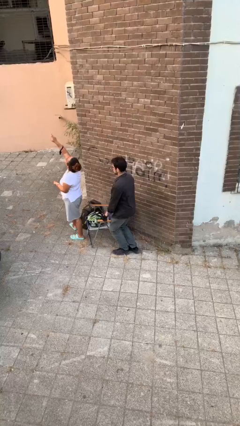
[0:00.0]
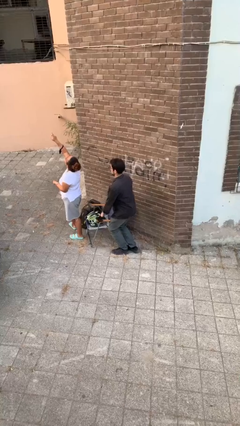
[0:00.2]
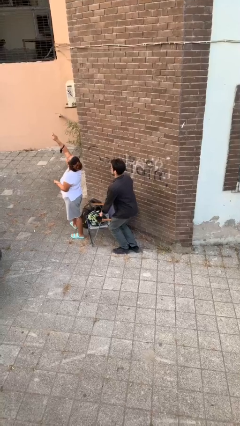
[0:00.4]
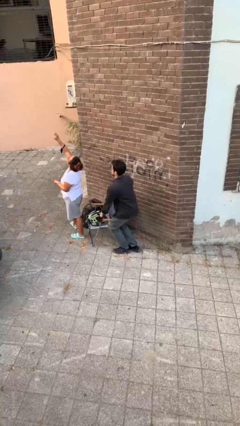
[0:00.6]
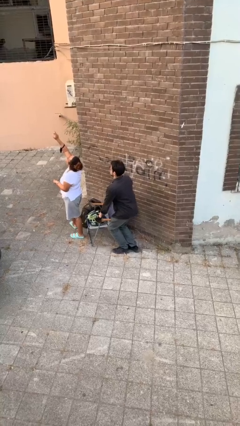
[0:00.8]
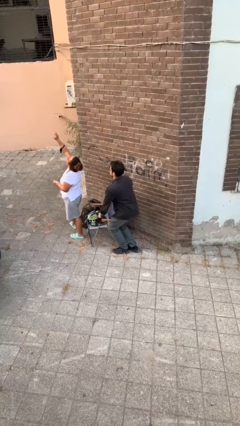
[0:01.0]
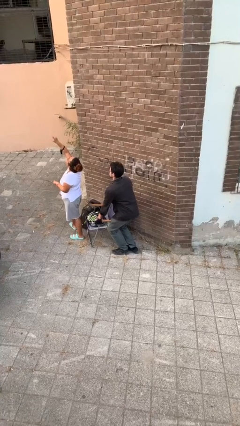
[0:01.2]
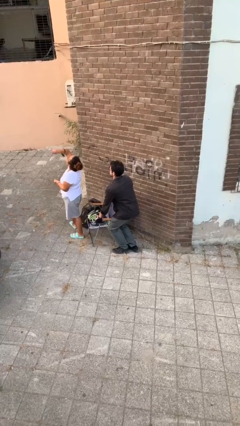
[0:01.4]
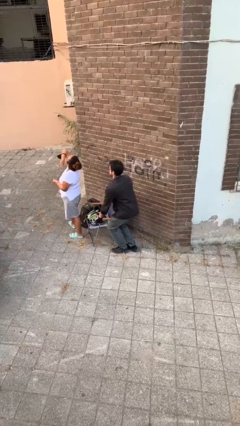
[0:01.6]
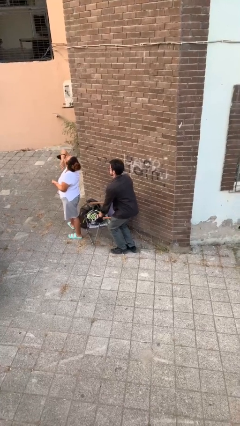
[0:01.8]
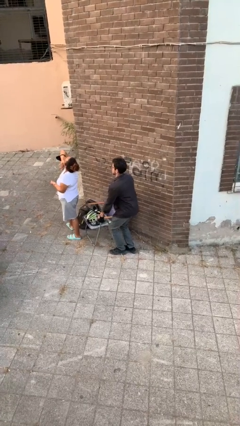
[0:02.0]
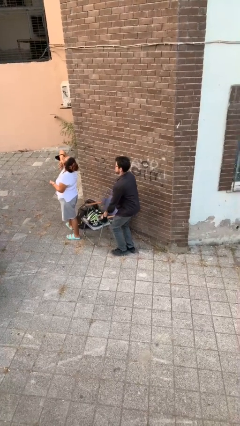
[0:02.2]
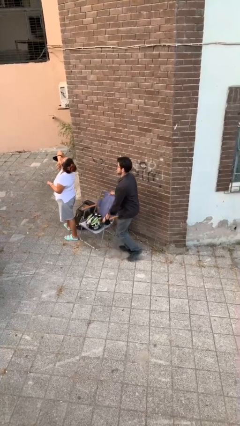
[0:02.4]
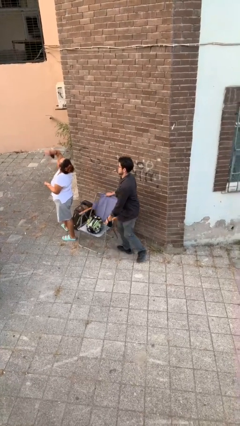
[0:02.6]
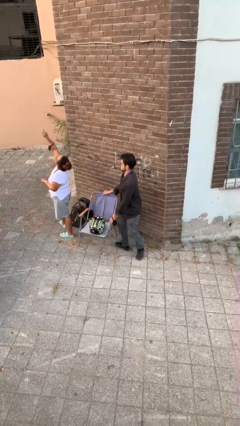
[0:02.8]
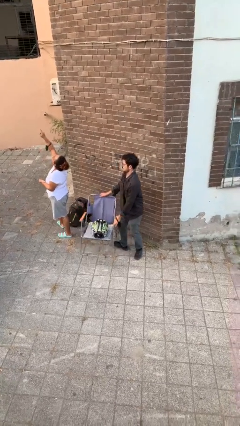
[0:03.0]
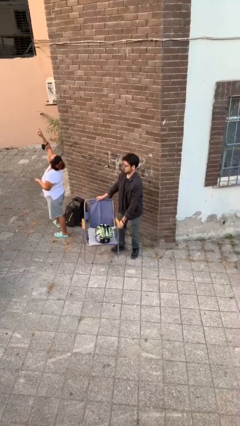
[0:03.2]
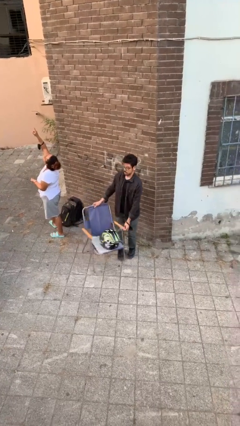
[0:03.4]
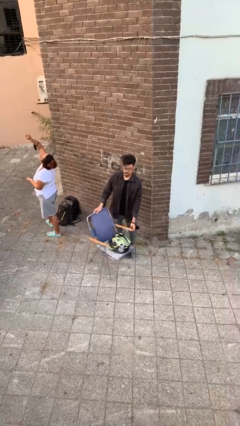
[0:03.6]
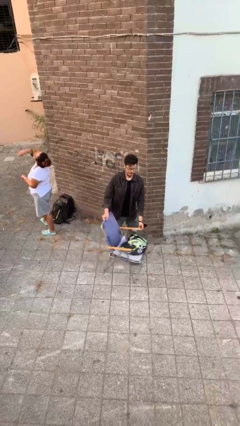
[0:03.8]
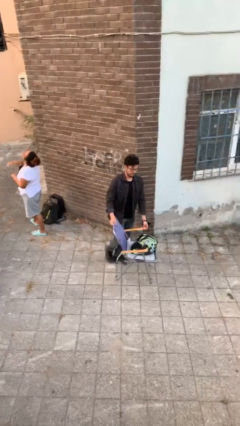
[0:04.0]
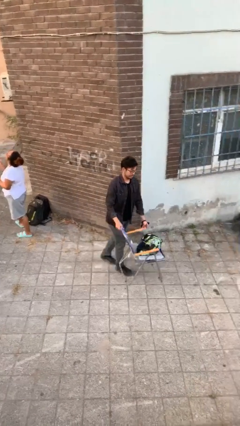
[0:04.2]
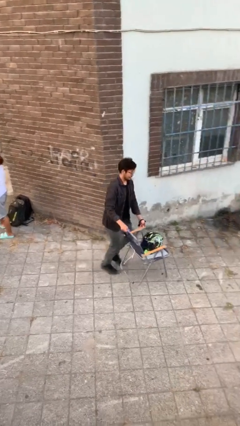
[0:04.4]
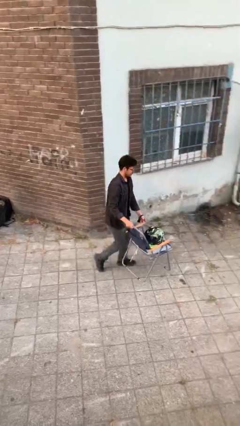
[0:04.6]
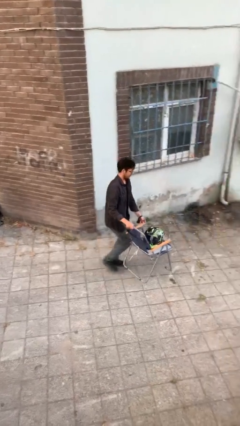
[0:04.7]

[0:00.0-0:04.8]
person steals object from person

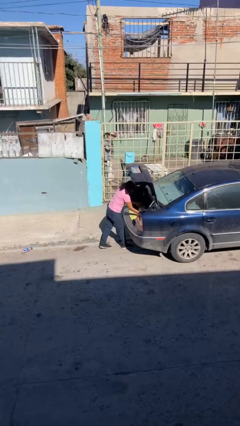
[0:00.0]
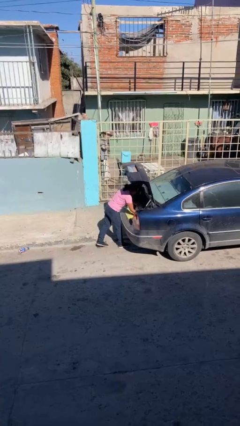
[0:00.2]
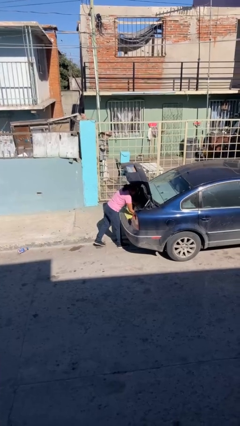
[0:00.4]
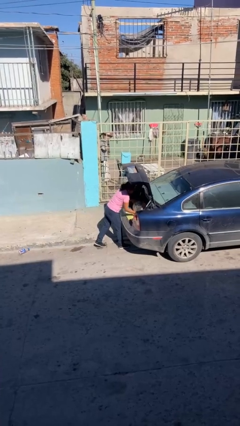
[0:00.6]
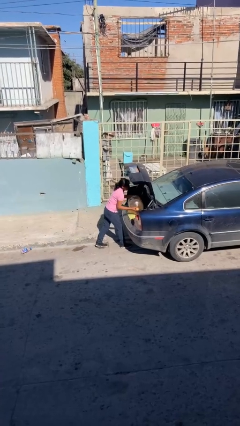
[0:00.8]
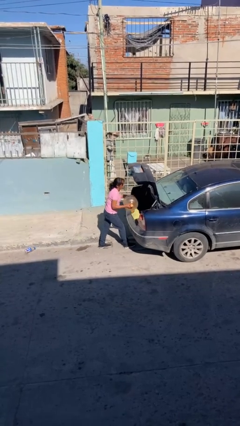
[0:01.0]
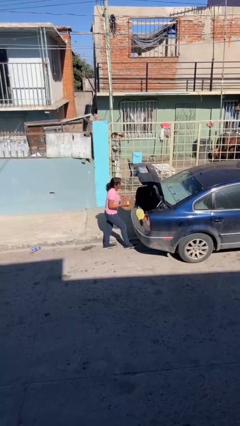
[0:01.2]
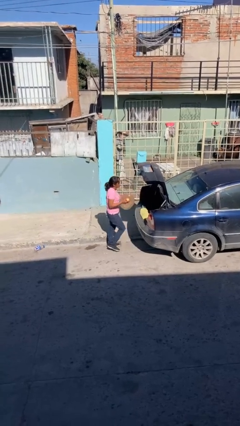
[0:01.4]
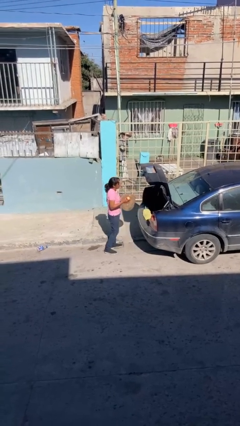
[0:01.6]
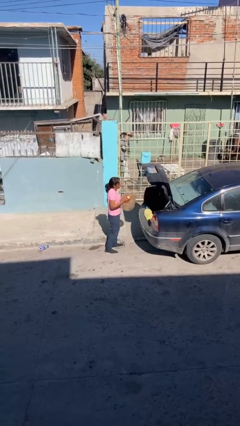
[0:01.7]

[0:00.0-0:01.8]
person unloads car

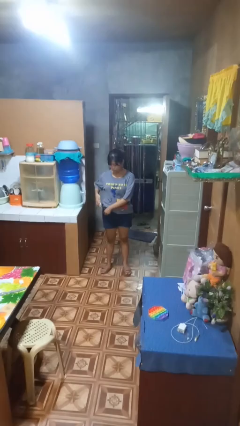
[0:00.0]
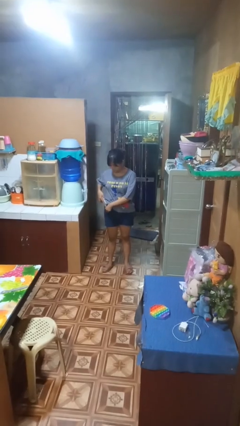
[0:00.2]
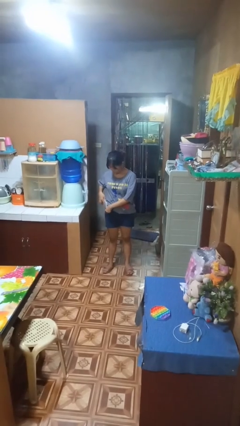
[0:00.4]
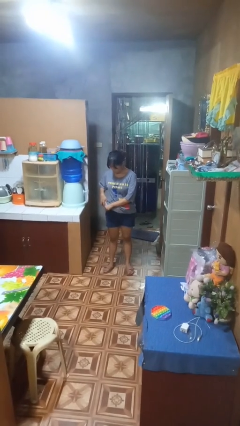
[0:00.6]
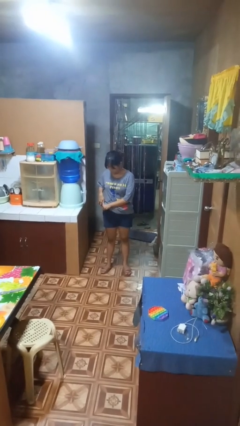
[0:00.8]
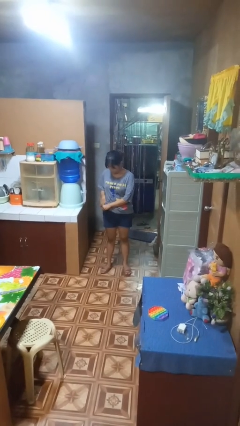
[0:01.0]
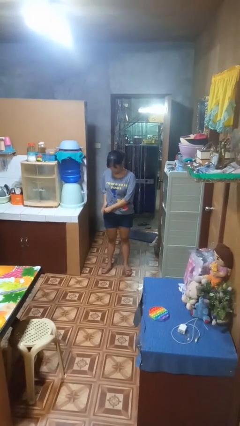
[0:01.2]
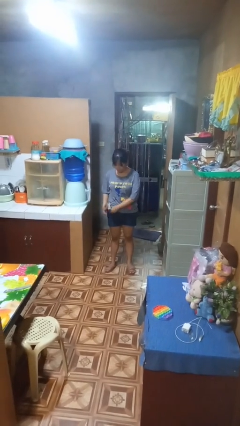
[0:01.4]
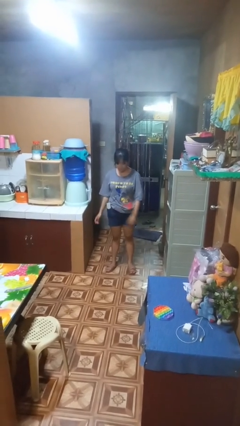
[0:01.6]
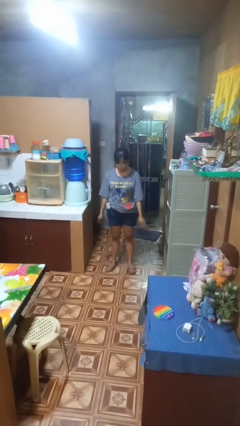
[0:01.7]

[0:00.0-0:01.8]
person puts phone into pocket

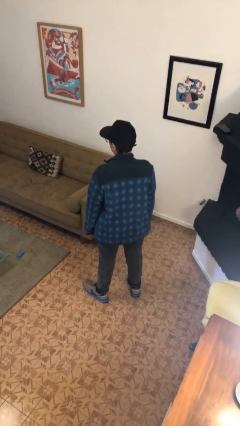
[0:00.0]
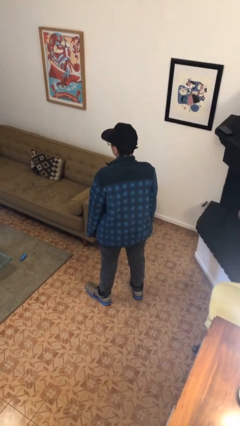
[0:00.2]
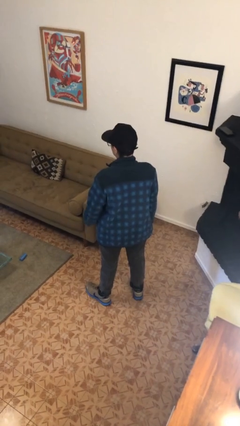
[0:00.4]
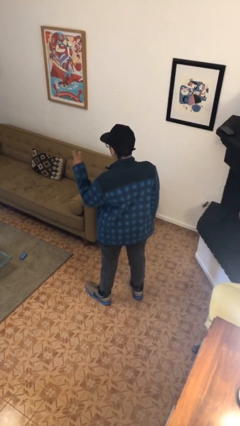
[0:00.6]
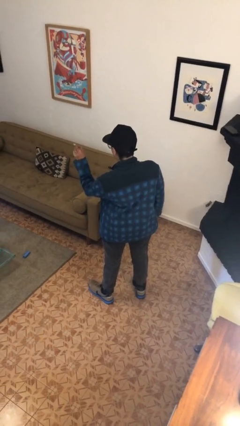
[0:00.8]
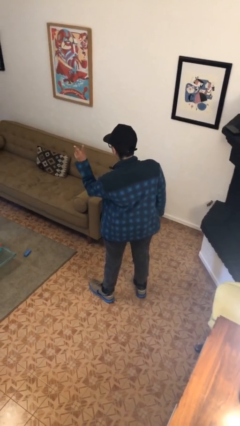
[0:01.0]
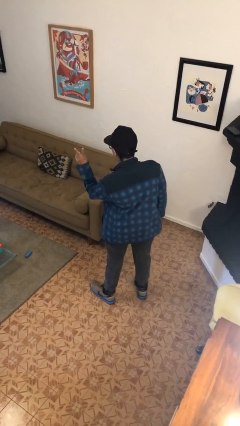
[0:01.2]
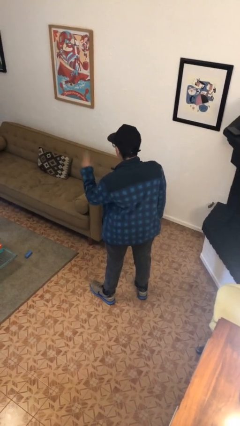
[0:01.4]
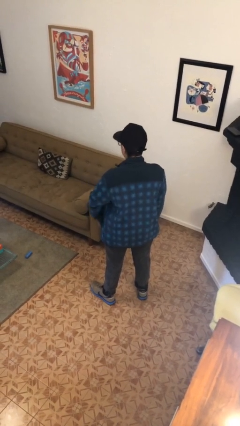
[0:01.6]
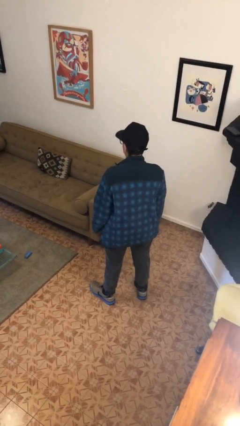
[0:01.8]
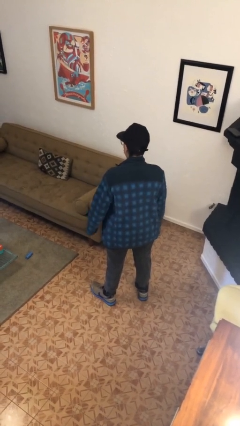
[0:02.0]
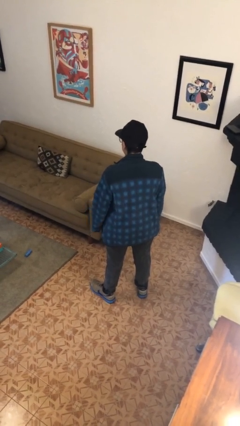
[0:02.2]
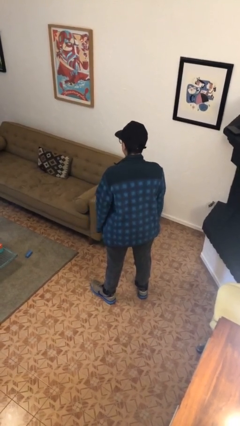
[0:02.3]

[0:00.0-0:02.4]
person gestures peace

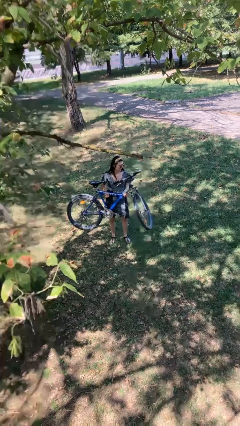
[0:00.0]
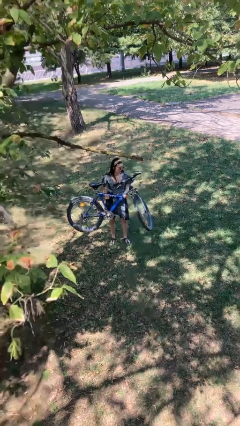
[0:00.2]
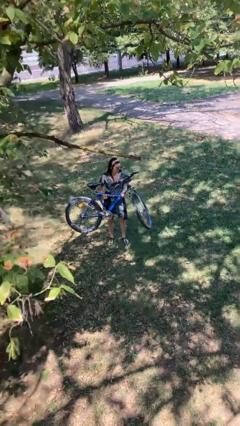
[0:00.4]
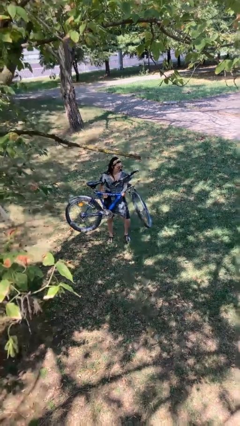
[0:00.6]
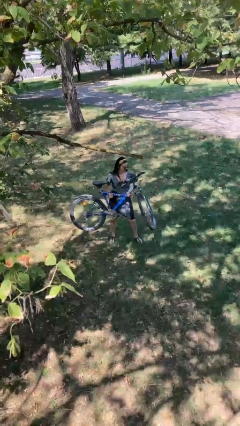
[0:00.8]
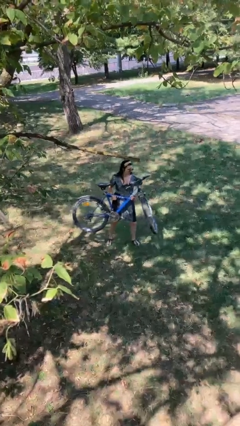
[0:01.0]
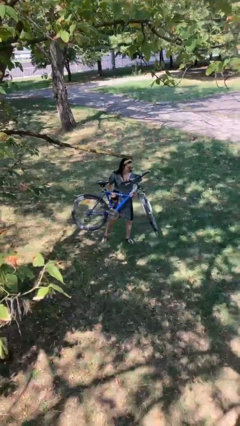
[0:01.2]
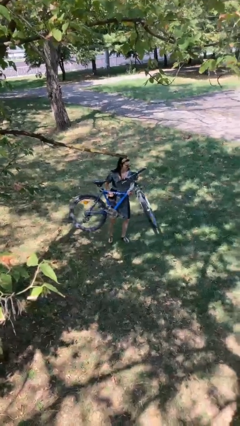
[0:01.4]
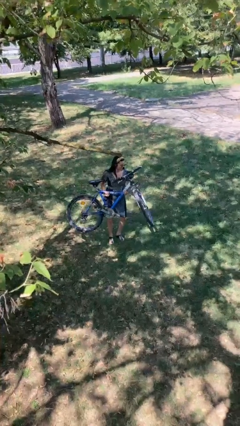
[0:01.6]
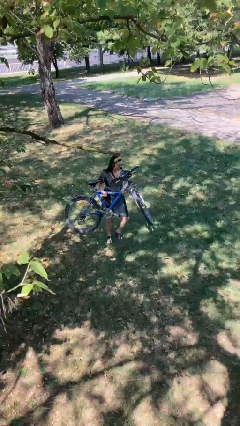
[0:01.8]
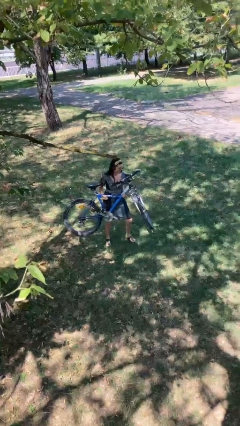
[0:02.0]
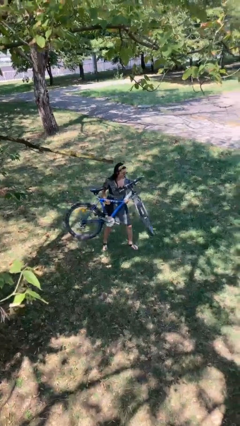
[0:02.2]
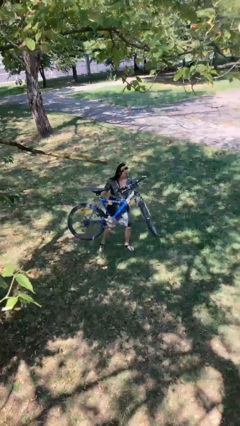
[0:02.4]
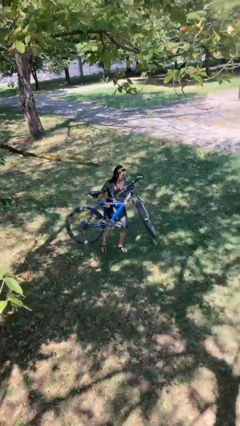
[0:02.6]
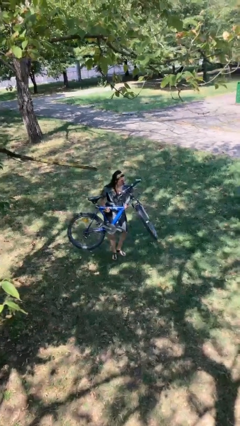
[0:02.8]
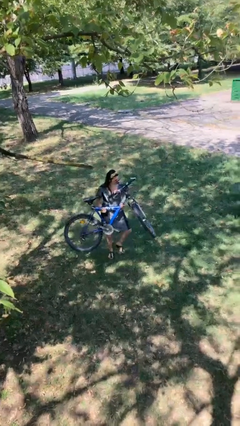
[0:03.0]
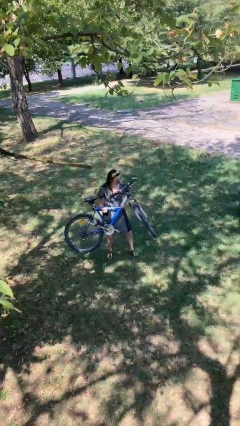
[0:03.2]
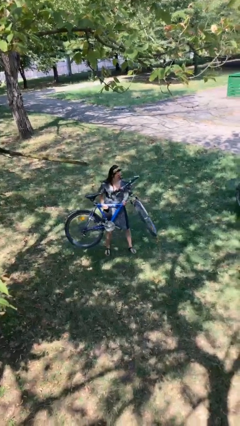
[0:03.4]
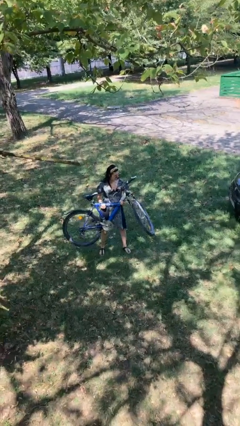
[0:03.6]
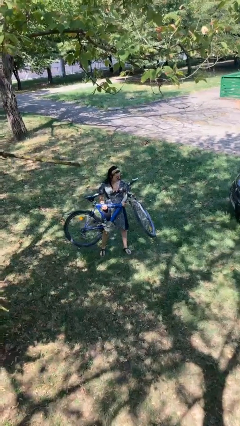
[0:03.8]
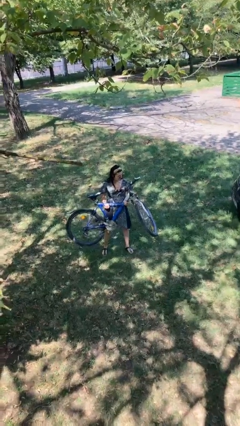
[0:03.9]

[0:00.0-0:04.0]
person carries bicycle

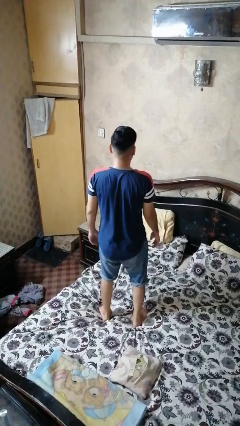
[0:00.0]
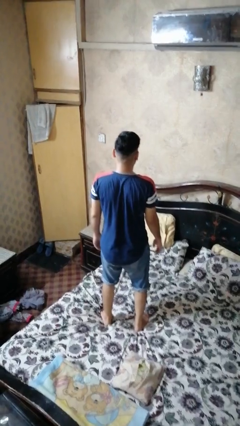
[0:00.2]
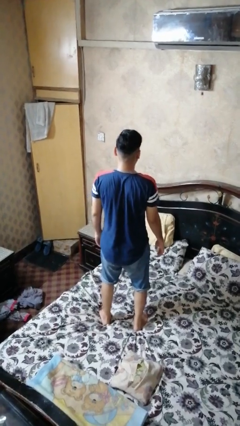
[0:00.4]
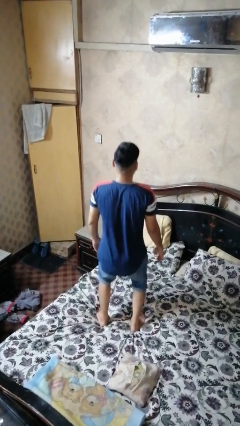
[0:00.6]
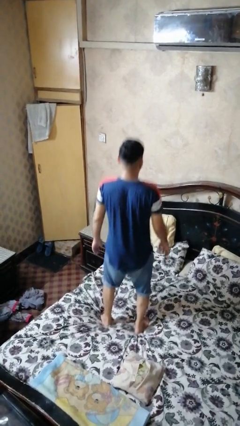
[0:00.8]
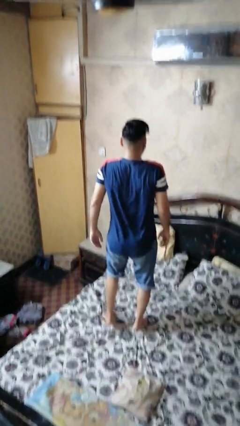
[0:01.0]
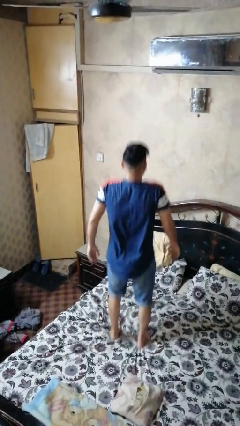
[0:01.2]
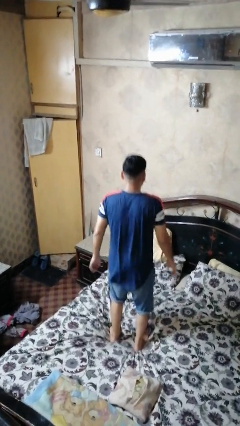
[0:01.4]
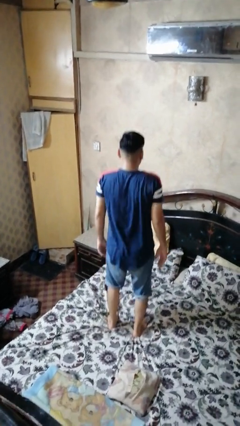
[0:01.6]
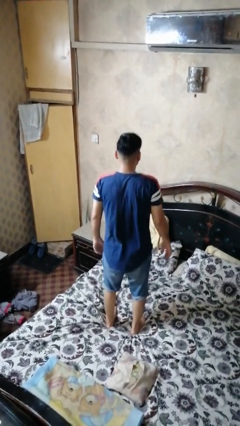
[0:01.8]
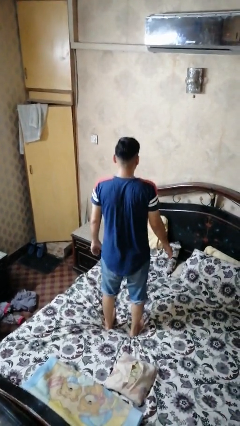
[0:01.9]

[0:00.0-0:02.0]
person jumps on bed

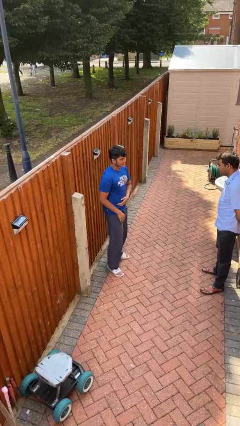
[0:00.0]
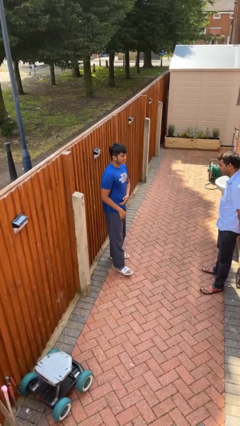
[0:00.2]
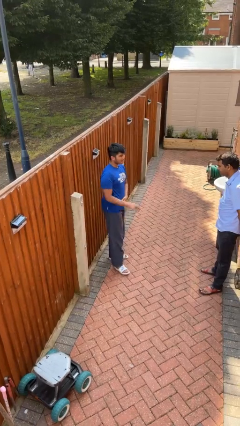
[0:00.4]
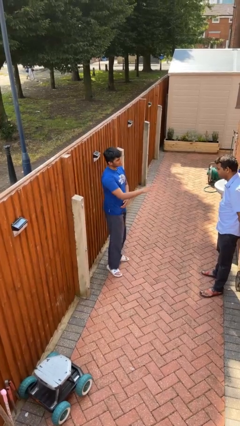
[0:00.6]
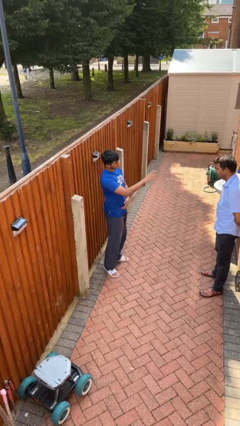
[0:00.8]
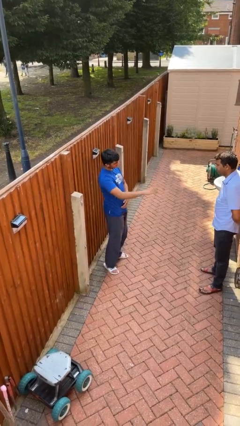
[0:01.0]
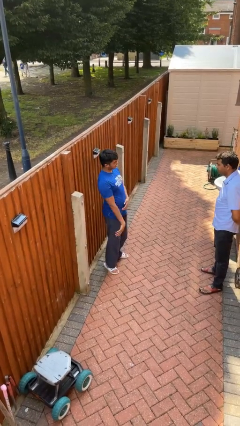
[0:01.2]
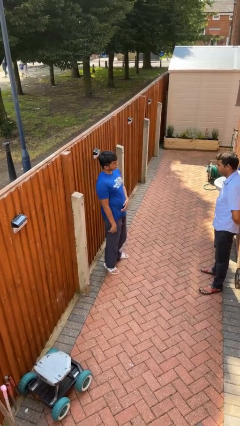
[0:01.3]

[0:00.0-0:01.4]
person laughs with person
